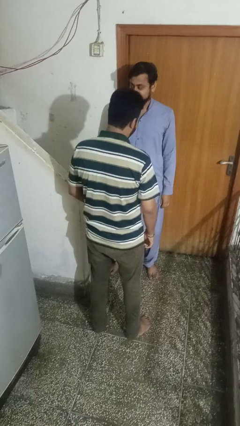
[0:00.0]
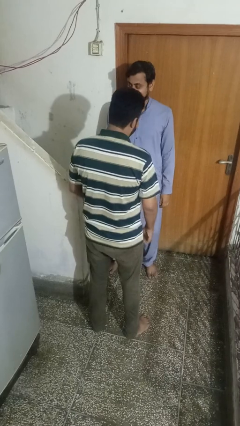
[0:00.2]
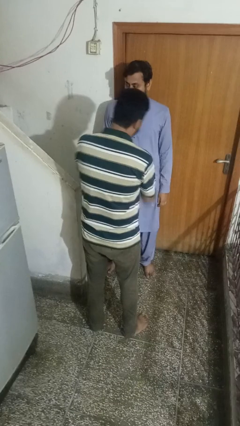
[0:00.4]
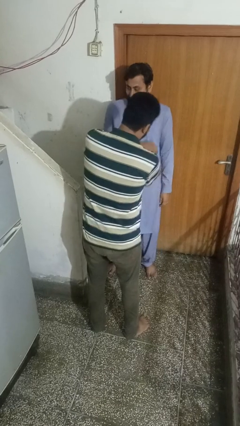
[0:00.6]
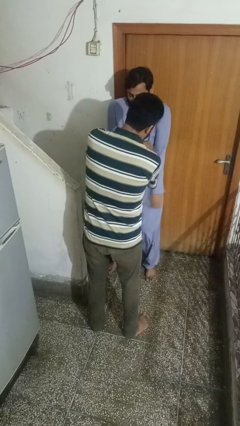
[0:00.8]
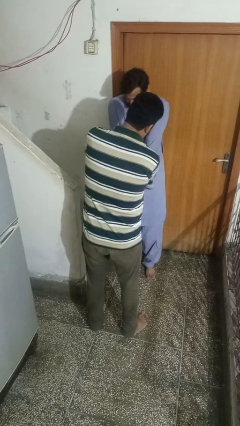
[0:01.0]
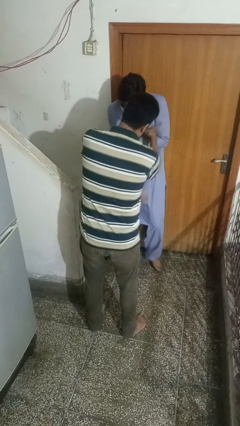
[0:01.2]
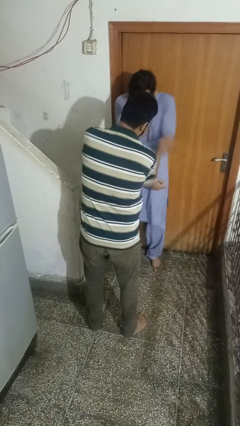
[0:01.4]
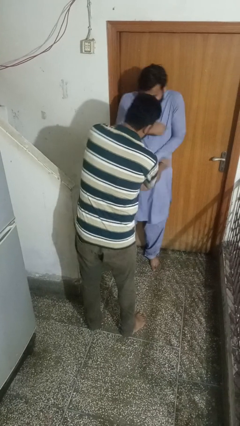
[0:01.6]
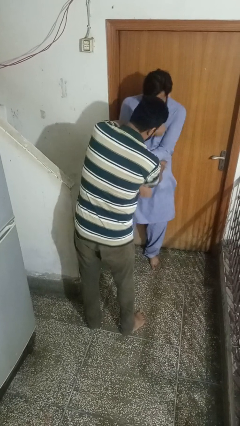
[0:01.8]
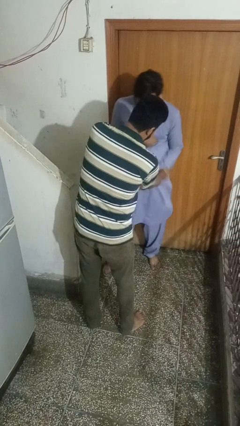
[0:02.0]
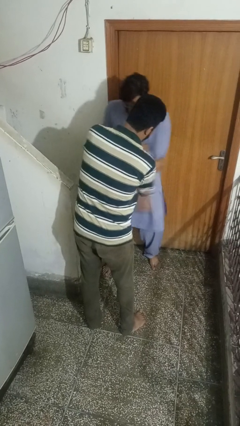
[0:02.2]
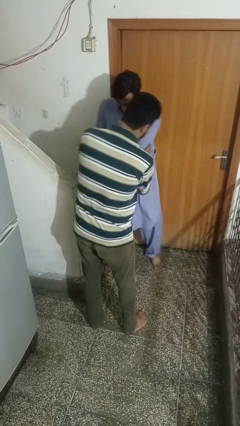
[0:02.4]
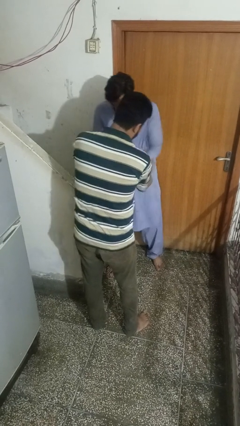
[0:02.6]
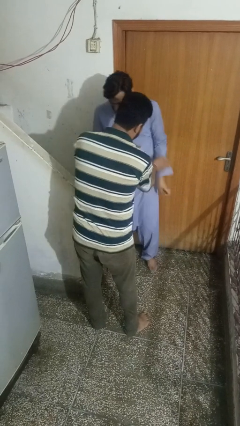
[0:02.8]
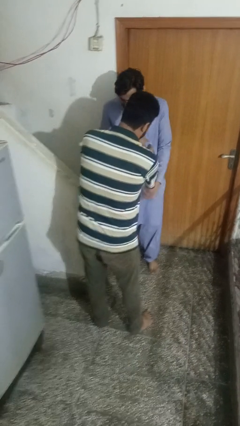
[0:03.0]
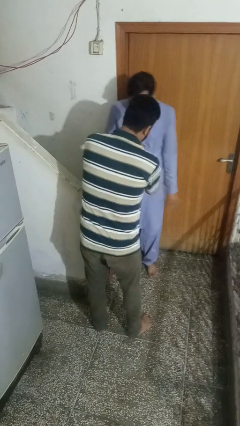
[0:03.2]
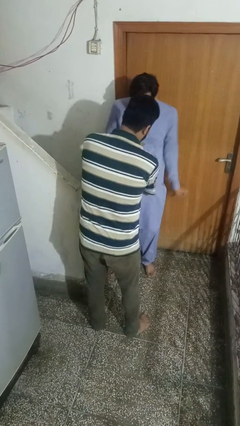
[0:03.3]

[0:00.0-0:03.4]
person tickles person

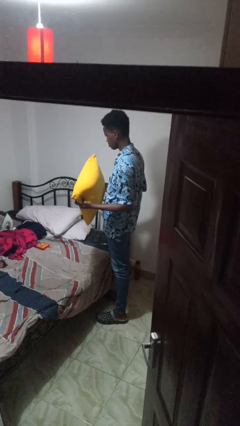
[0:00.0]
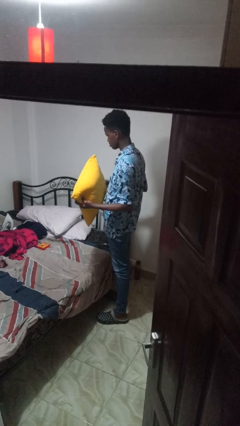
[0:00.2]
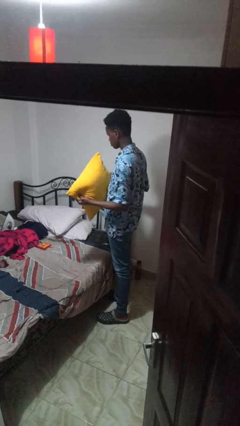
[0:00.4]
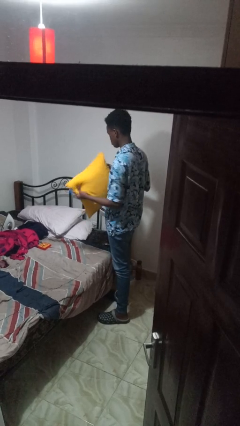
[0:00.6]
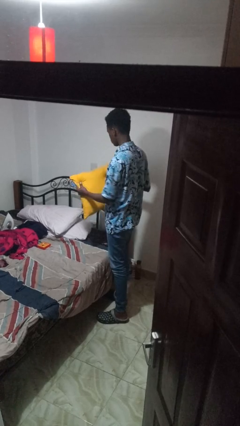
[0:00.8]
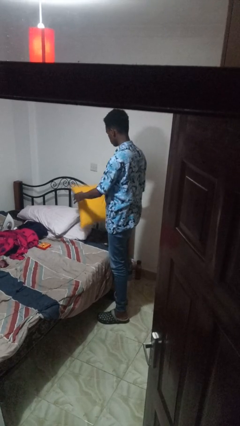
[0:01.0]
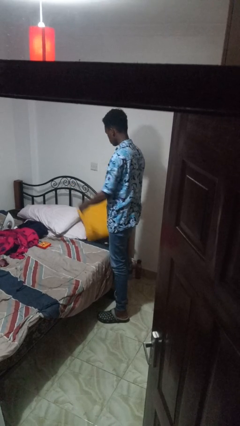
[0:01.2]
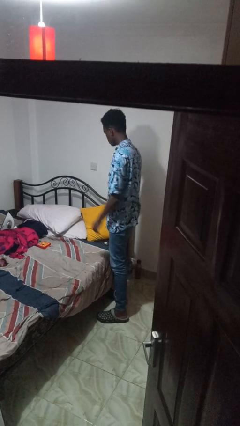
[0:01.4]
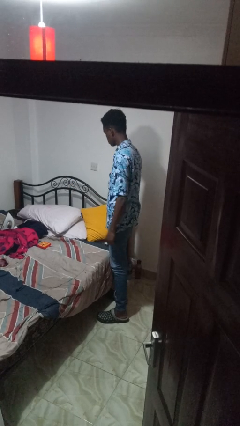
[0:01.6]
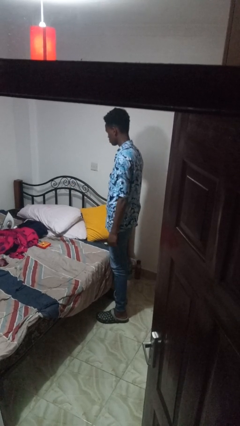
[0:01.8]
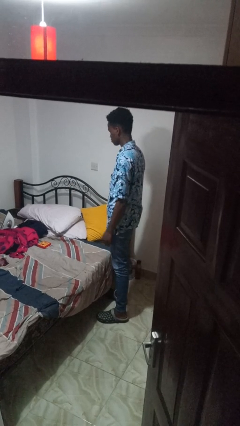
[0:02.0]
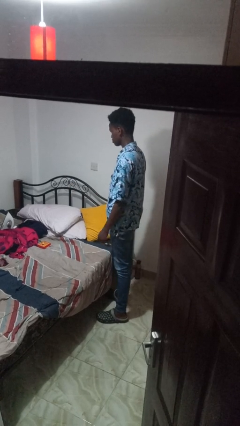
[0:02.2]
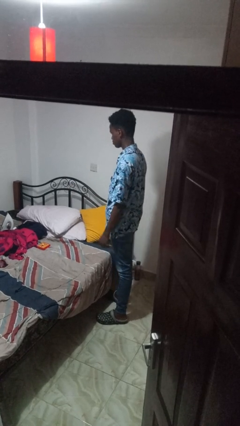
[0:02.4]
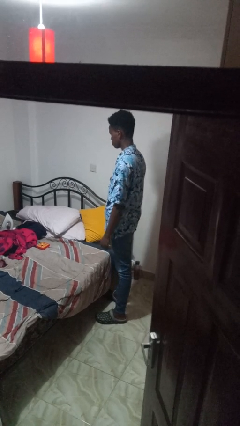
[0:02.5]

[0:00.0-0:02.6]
person puts down object on bed

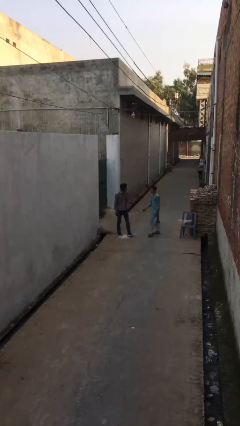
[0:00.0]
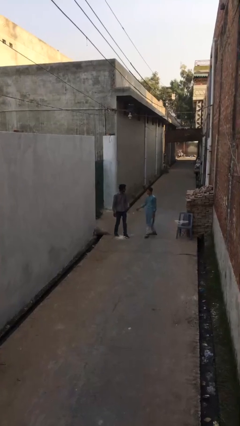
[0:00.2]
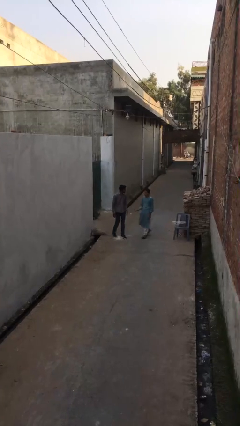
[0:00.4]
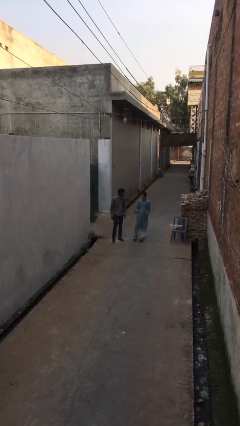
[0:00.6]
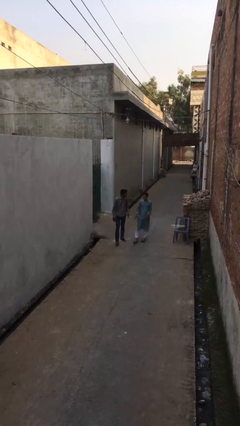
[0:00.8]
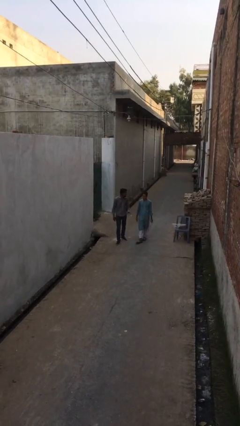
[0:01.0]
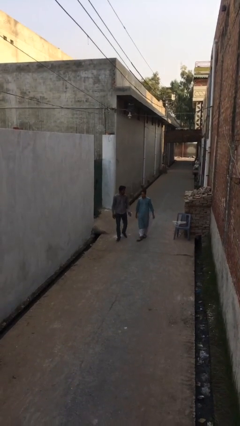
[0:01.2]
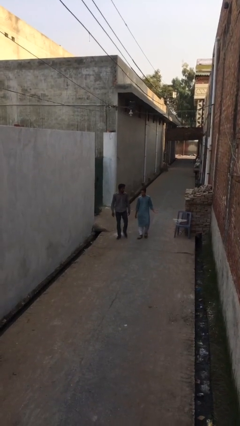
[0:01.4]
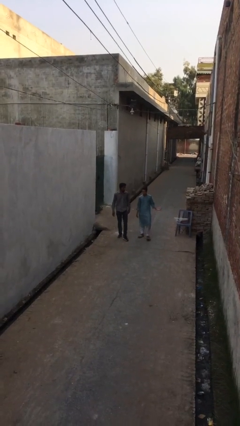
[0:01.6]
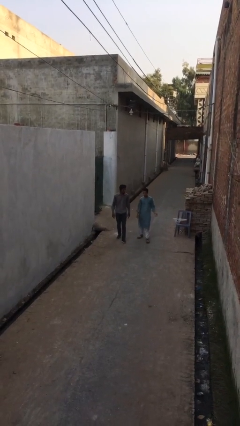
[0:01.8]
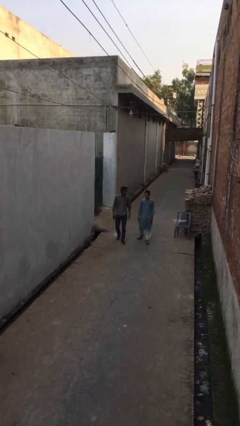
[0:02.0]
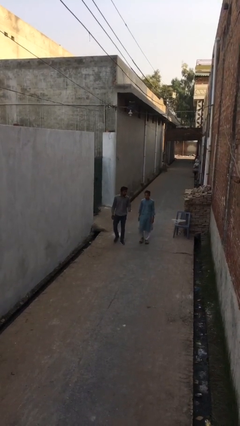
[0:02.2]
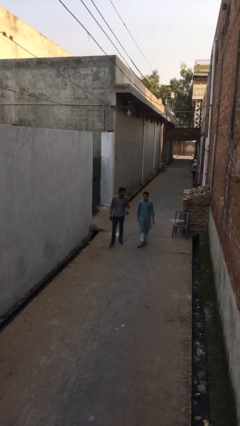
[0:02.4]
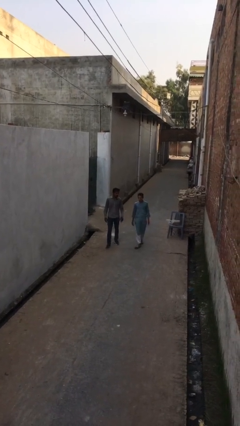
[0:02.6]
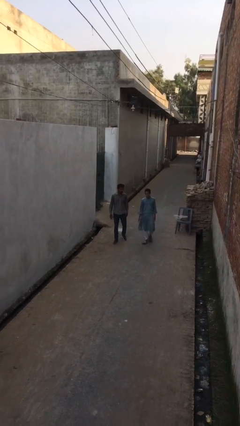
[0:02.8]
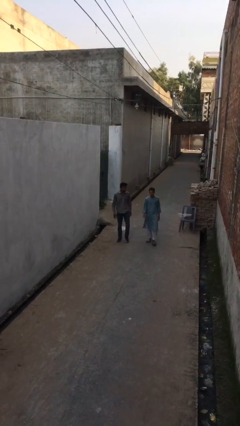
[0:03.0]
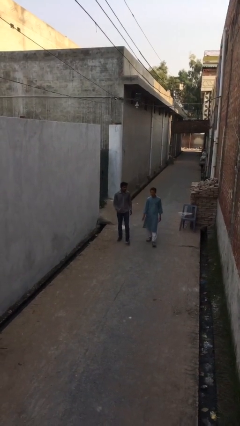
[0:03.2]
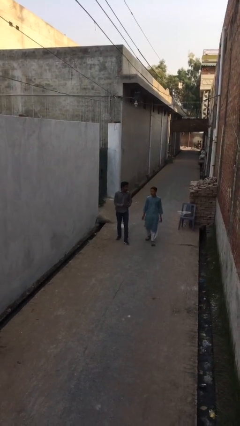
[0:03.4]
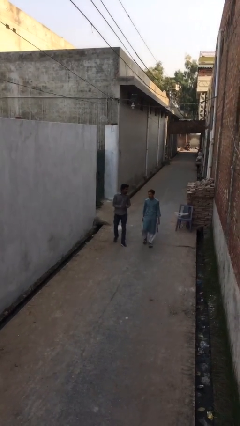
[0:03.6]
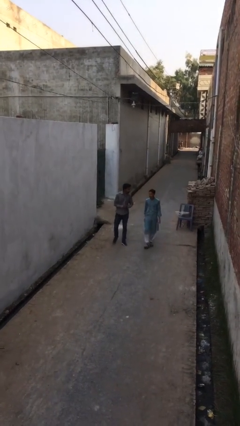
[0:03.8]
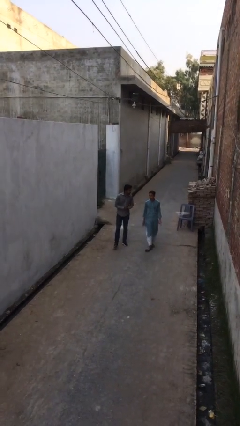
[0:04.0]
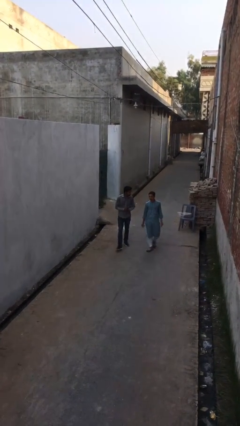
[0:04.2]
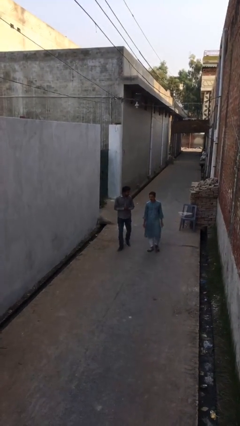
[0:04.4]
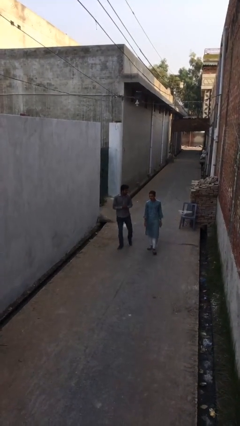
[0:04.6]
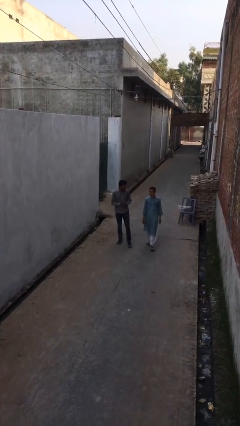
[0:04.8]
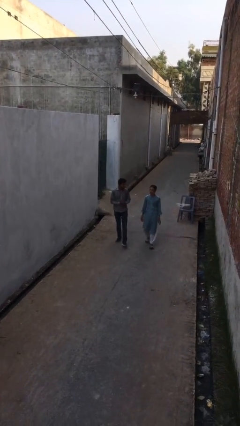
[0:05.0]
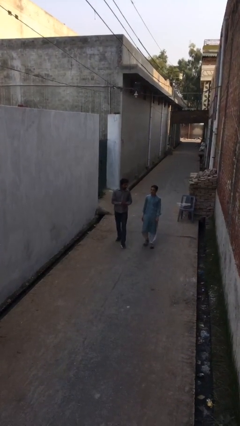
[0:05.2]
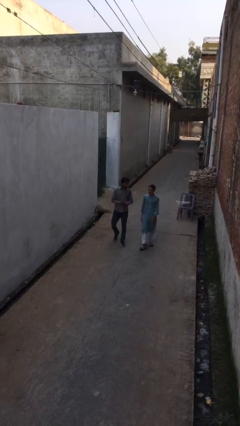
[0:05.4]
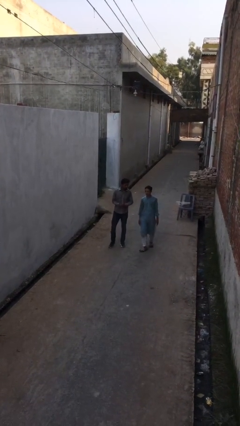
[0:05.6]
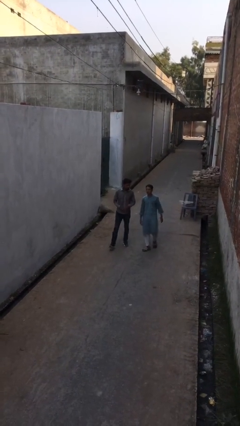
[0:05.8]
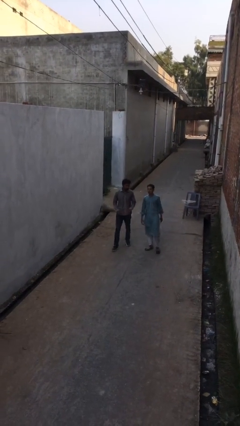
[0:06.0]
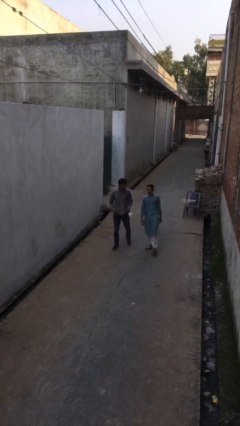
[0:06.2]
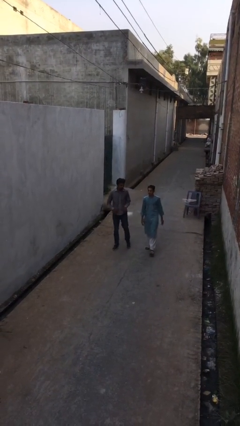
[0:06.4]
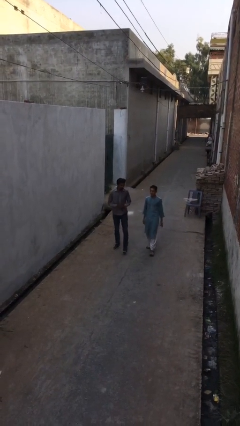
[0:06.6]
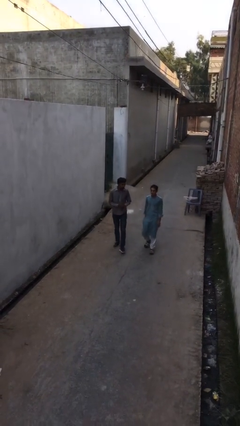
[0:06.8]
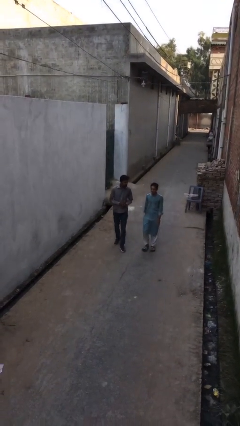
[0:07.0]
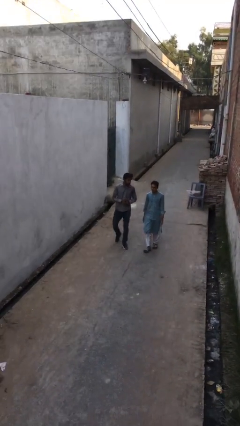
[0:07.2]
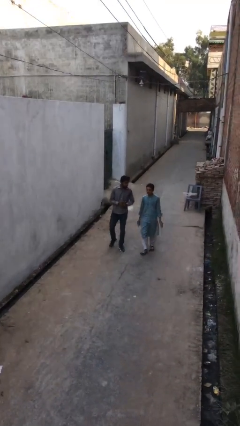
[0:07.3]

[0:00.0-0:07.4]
person talks to person

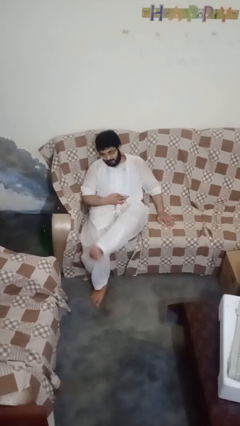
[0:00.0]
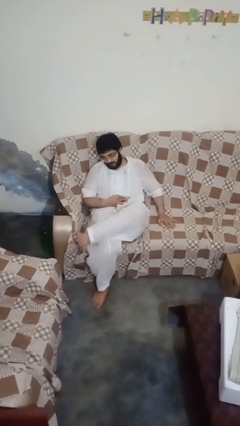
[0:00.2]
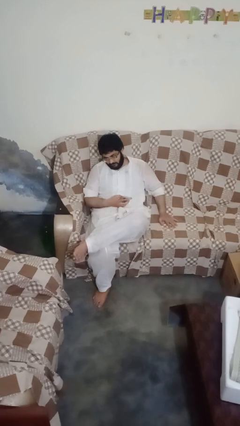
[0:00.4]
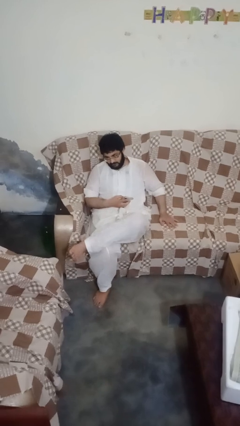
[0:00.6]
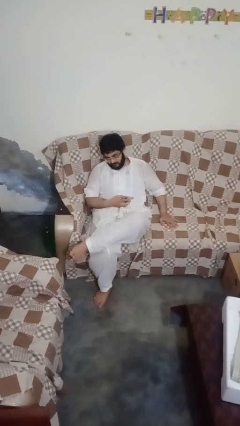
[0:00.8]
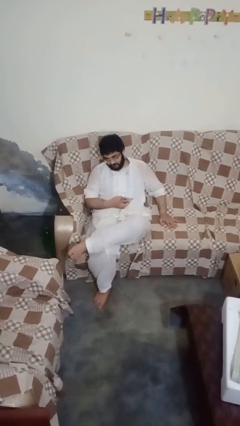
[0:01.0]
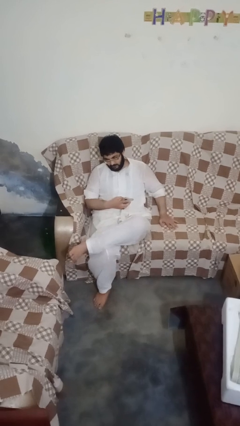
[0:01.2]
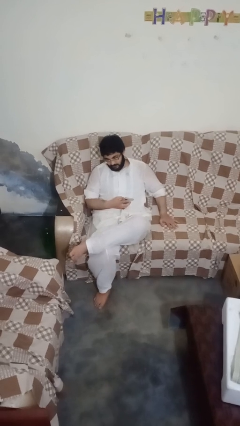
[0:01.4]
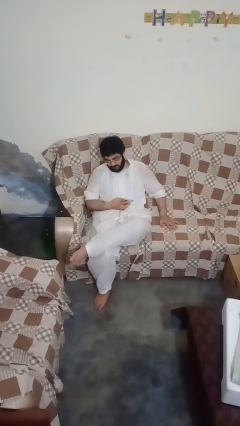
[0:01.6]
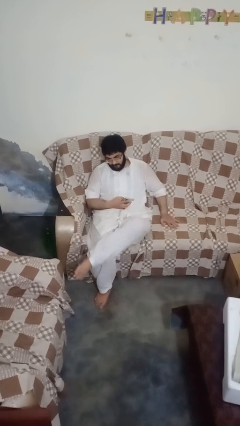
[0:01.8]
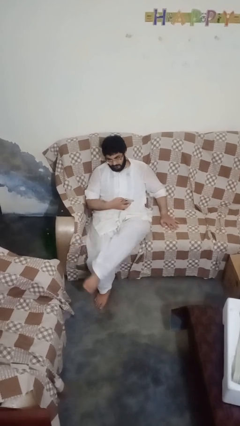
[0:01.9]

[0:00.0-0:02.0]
person crosses legs

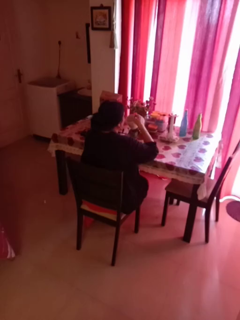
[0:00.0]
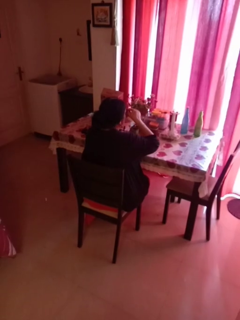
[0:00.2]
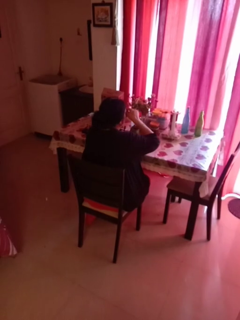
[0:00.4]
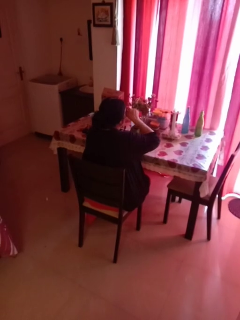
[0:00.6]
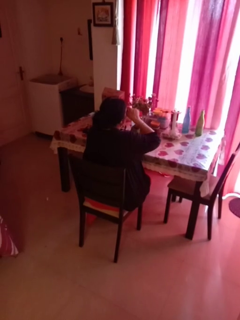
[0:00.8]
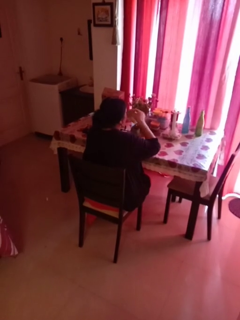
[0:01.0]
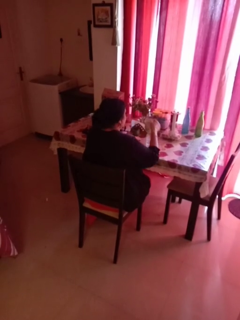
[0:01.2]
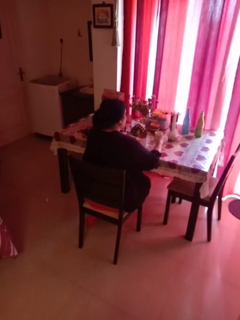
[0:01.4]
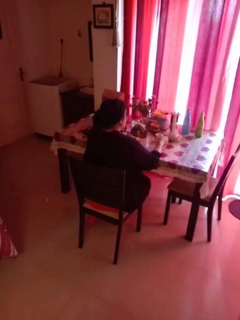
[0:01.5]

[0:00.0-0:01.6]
person drinks from mug

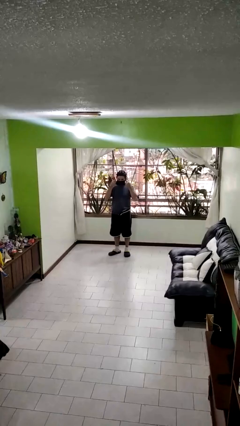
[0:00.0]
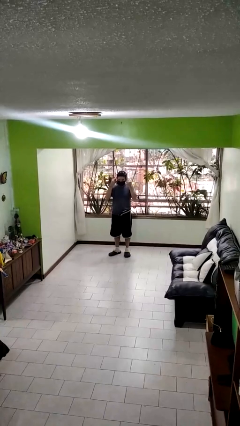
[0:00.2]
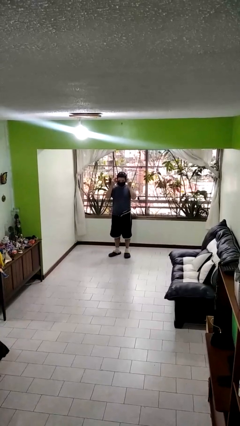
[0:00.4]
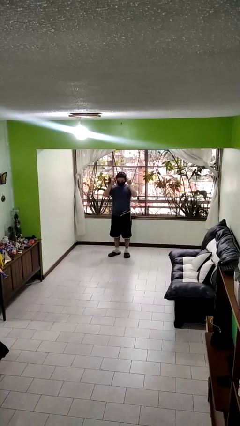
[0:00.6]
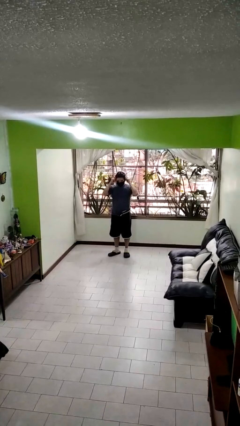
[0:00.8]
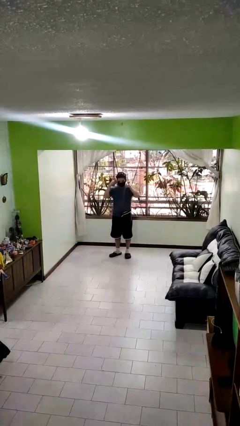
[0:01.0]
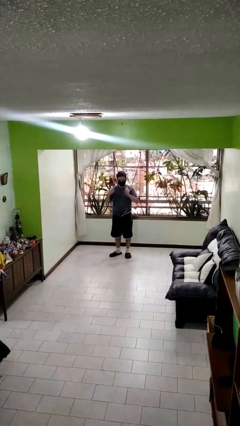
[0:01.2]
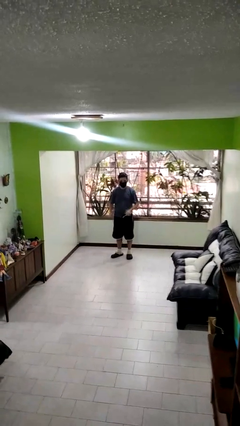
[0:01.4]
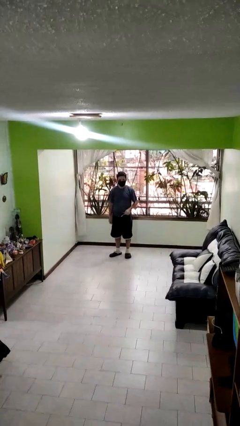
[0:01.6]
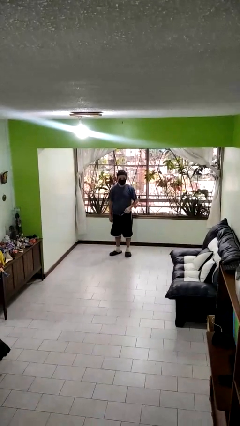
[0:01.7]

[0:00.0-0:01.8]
person puts on facemask
